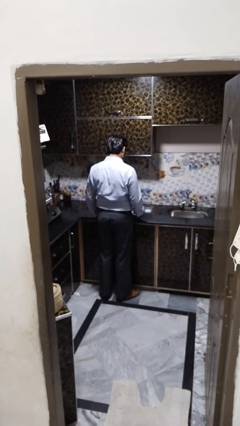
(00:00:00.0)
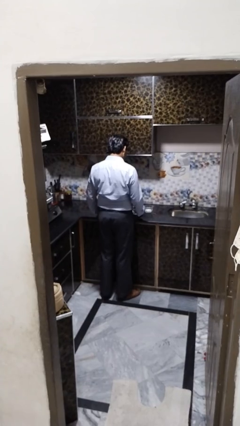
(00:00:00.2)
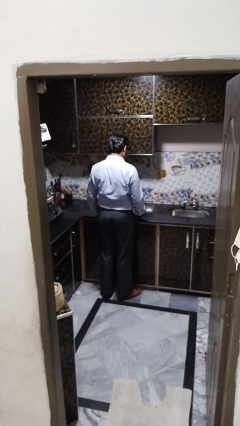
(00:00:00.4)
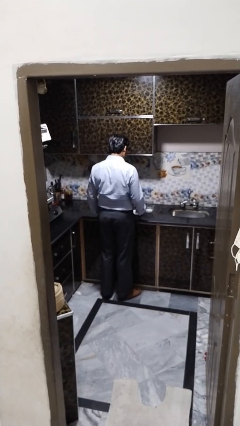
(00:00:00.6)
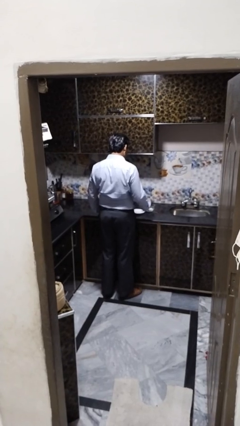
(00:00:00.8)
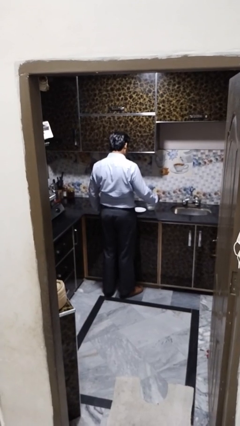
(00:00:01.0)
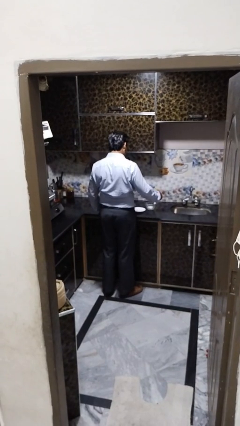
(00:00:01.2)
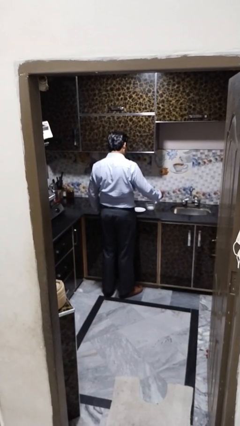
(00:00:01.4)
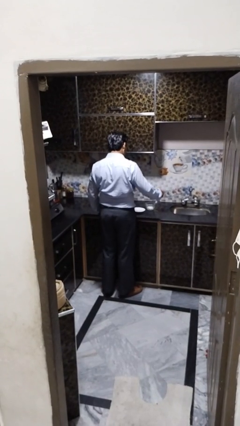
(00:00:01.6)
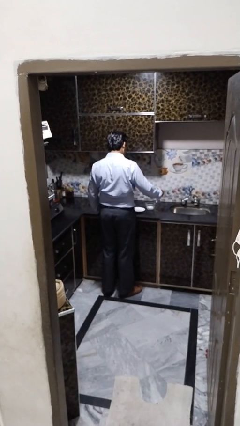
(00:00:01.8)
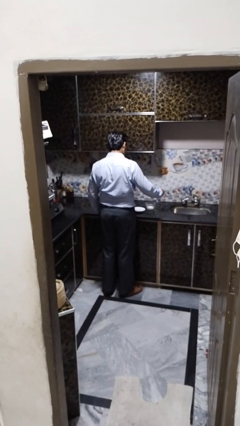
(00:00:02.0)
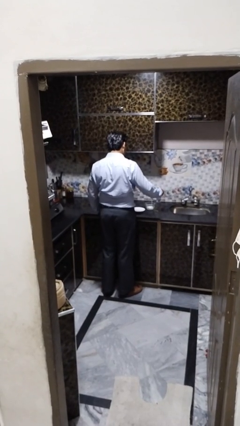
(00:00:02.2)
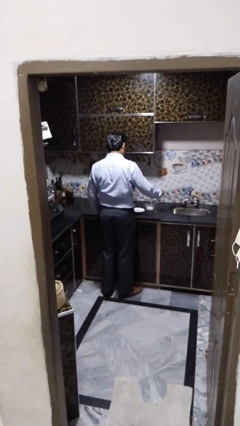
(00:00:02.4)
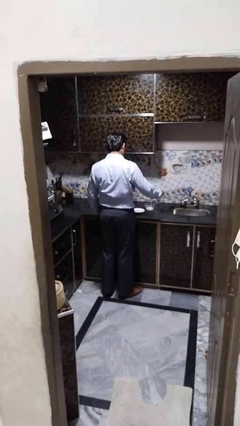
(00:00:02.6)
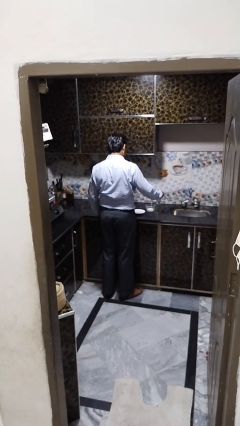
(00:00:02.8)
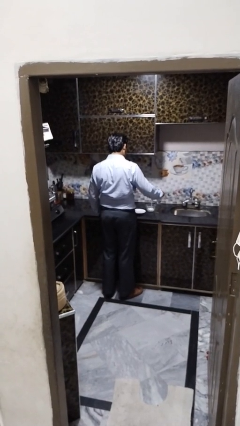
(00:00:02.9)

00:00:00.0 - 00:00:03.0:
person pours into bowl

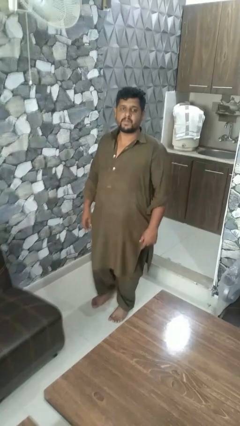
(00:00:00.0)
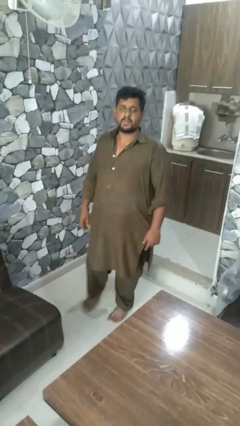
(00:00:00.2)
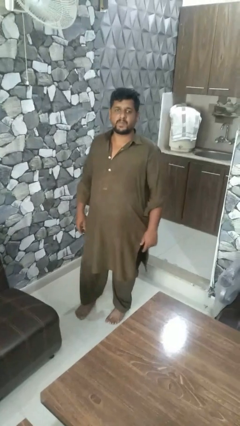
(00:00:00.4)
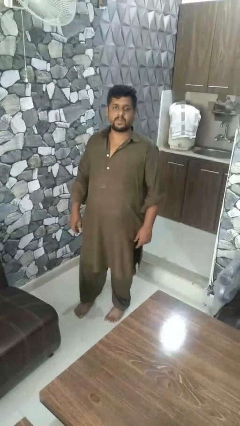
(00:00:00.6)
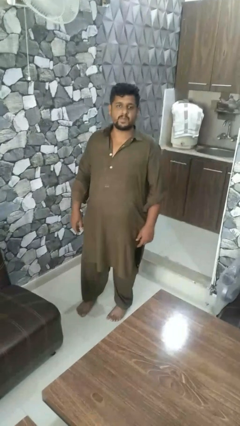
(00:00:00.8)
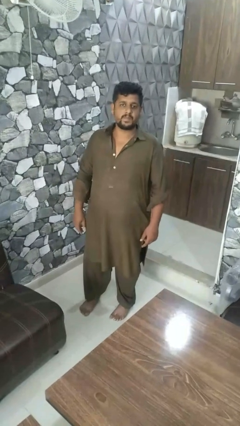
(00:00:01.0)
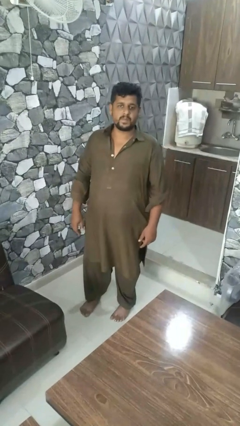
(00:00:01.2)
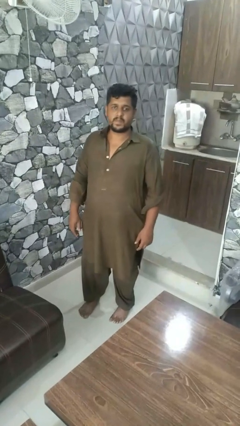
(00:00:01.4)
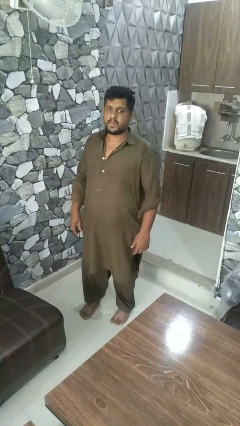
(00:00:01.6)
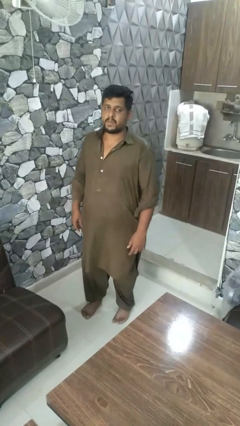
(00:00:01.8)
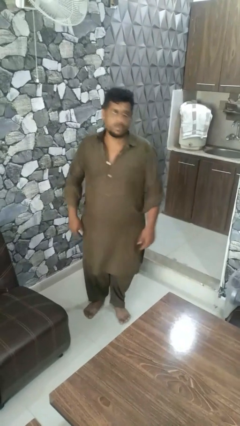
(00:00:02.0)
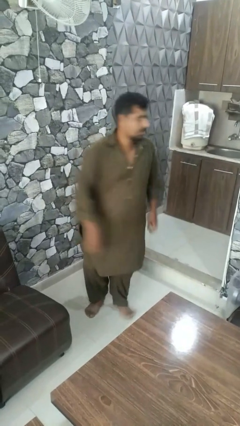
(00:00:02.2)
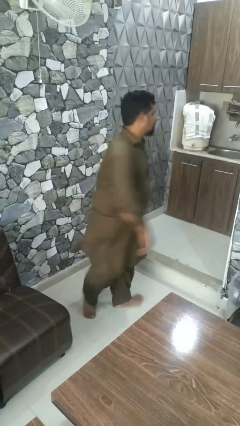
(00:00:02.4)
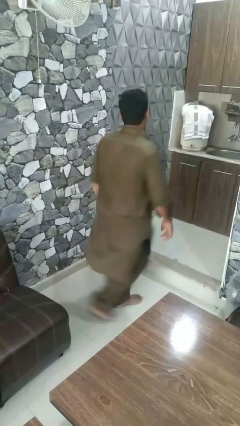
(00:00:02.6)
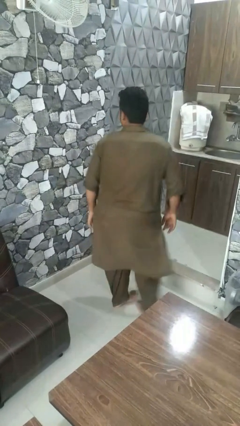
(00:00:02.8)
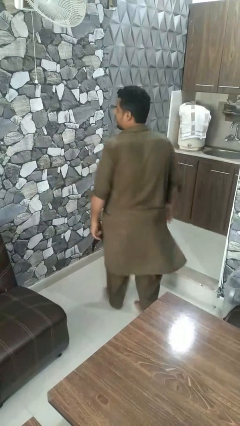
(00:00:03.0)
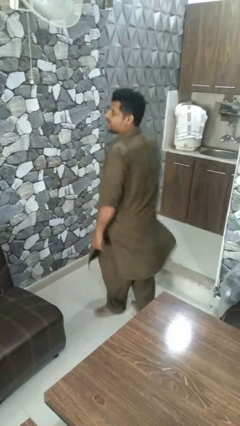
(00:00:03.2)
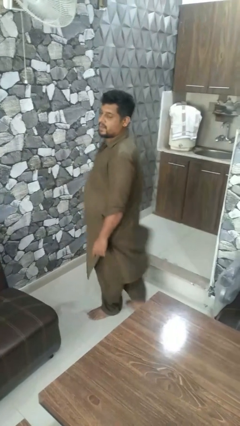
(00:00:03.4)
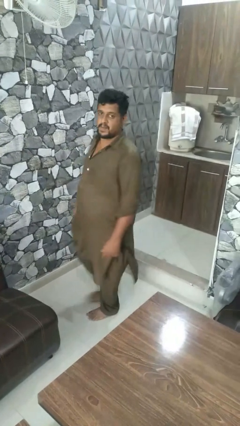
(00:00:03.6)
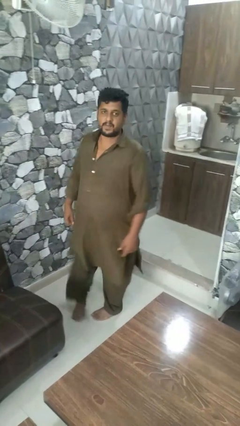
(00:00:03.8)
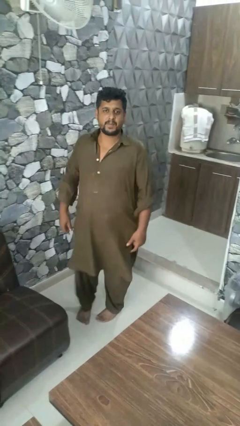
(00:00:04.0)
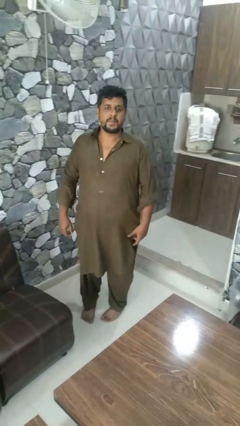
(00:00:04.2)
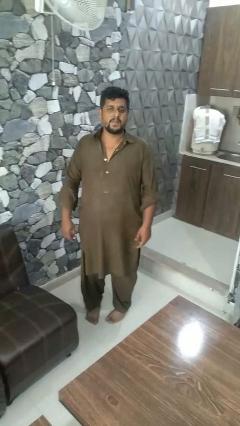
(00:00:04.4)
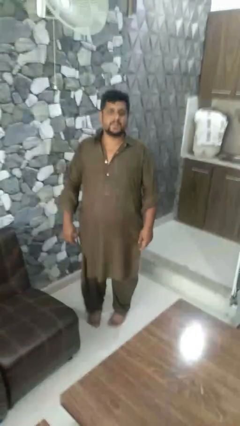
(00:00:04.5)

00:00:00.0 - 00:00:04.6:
person twirls

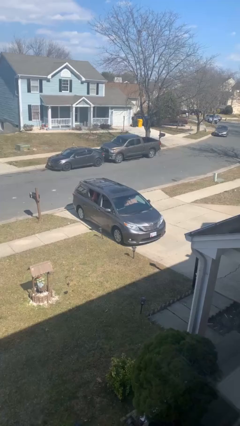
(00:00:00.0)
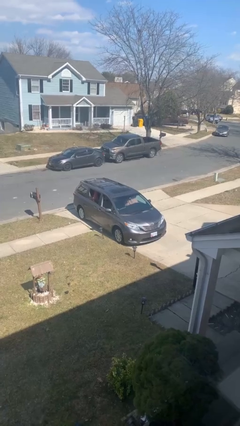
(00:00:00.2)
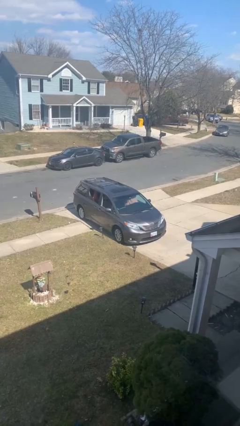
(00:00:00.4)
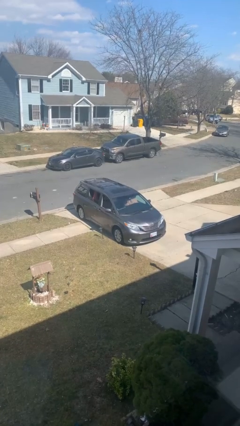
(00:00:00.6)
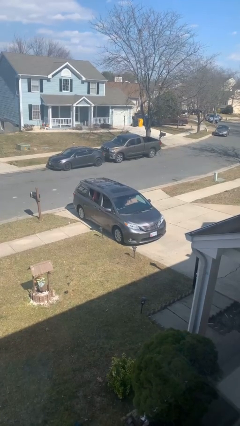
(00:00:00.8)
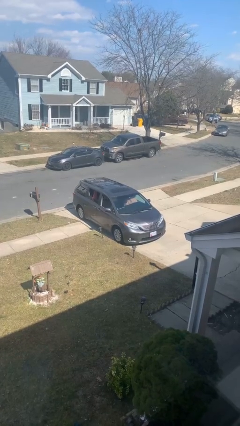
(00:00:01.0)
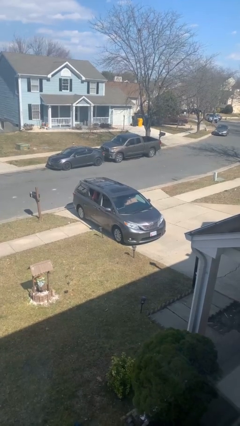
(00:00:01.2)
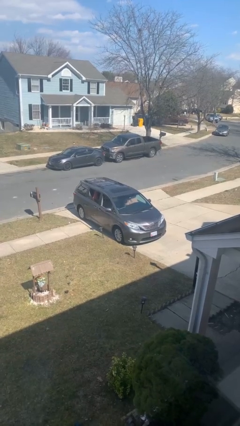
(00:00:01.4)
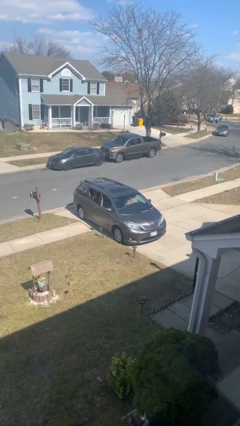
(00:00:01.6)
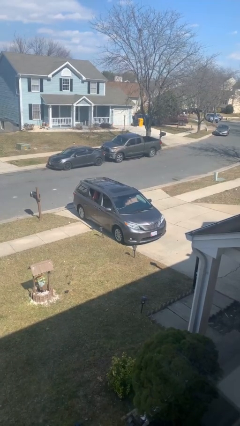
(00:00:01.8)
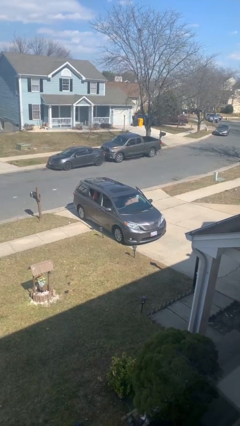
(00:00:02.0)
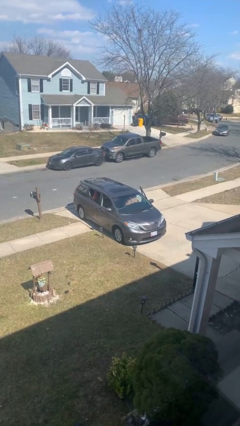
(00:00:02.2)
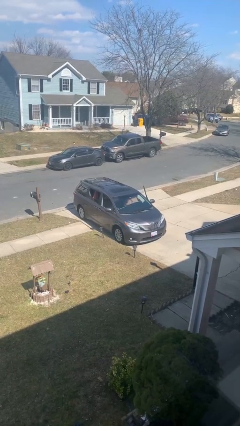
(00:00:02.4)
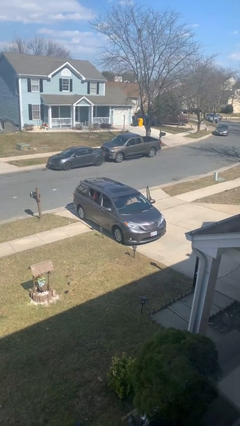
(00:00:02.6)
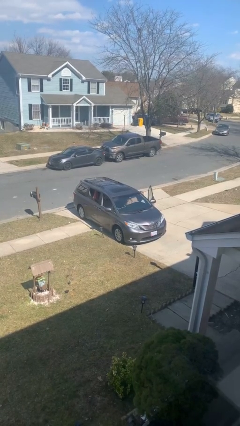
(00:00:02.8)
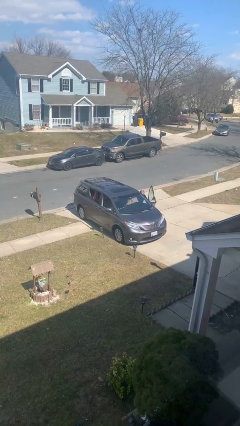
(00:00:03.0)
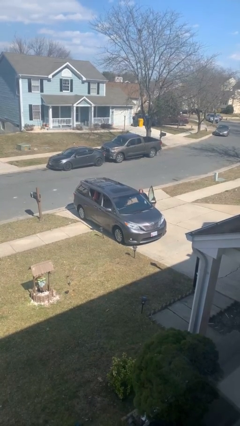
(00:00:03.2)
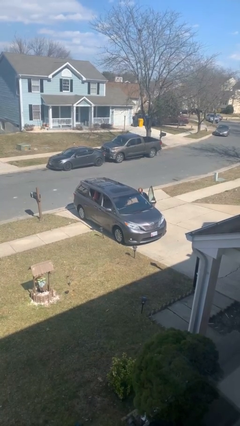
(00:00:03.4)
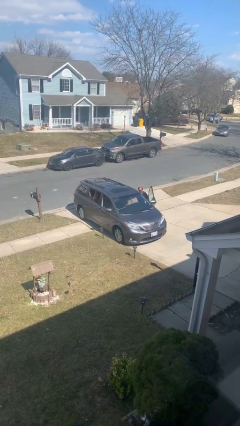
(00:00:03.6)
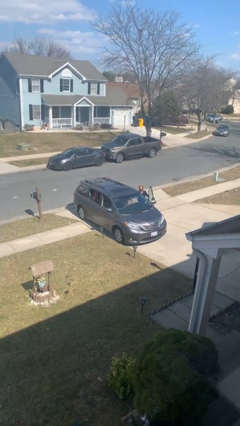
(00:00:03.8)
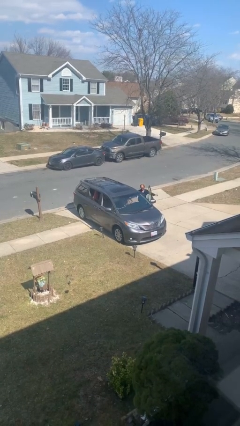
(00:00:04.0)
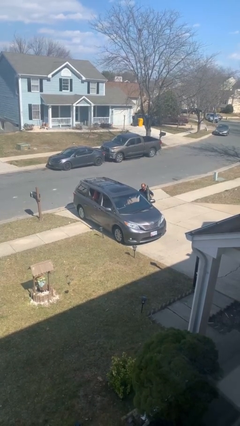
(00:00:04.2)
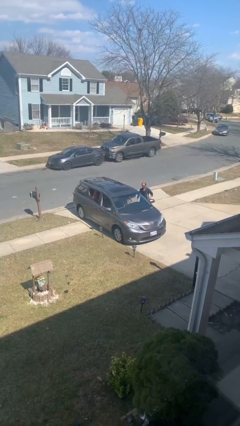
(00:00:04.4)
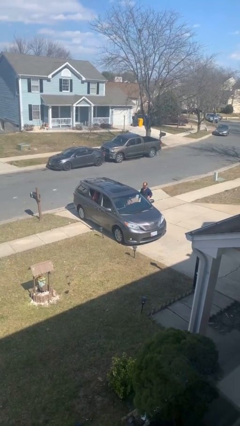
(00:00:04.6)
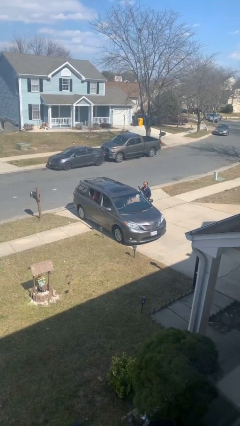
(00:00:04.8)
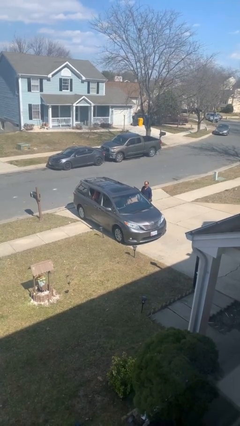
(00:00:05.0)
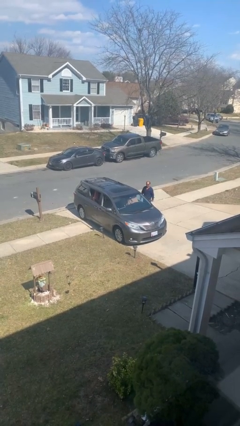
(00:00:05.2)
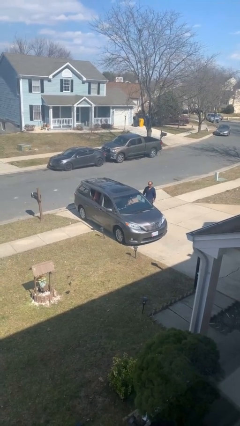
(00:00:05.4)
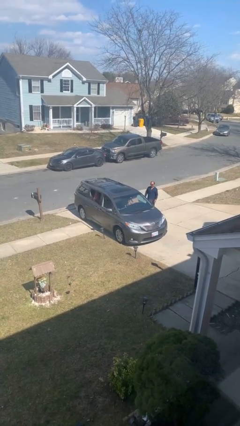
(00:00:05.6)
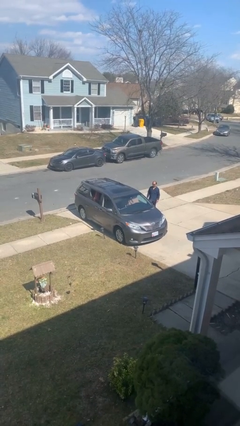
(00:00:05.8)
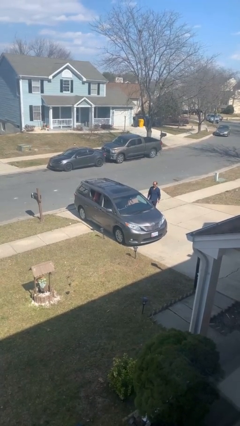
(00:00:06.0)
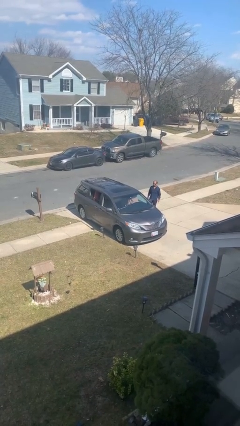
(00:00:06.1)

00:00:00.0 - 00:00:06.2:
car drops off person

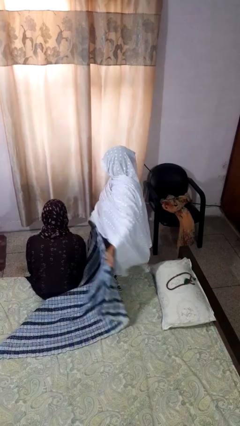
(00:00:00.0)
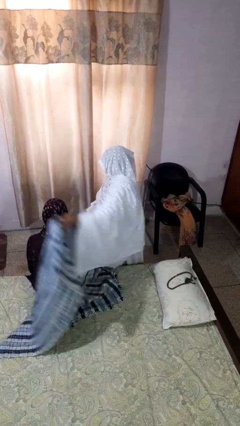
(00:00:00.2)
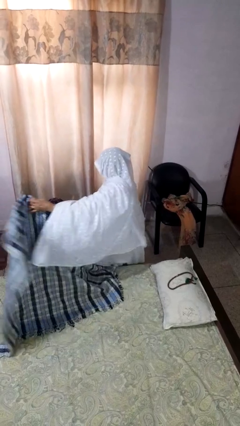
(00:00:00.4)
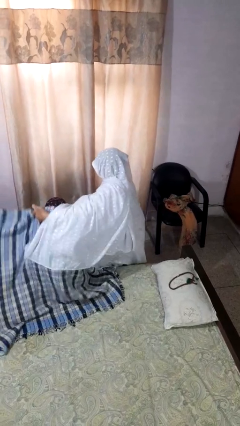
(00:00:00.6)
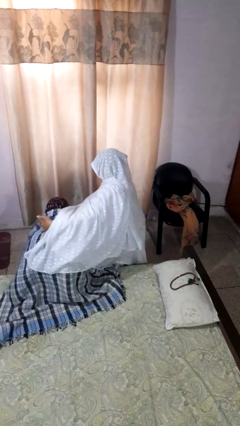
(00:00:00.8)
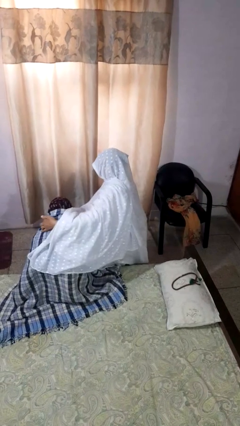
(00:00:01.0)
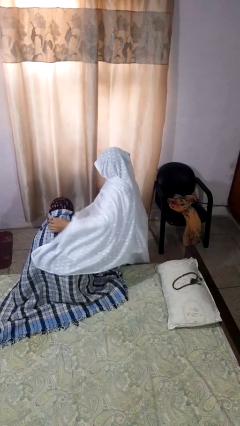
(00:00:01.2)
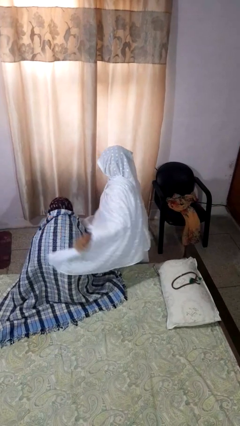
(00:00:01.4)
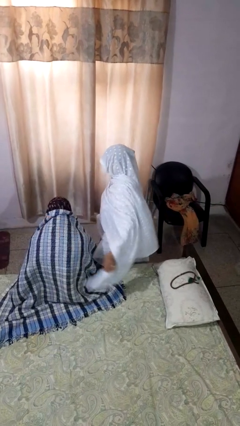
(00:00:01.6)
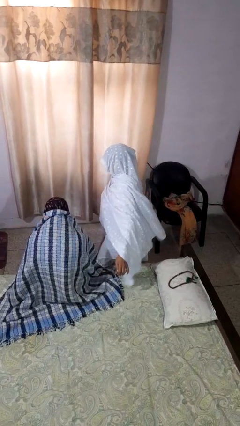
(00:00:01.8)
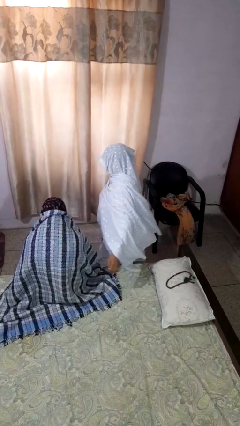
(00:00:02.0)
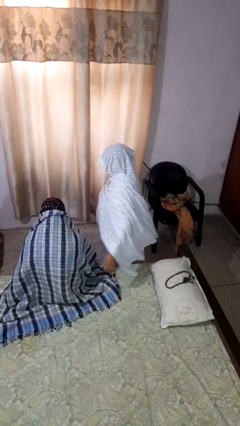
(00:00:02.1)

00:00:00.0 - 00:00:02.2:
person covers friend with blanket

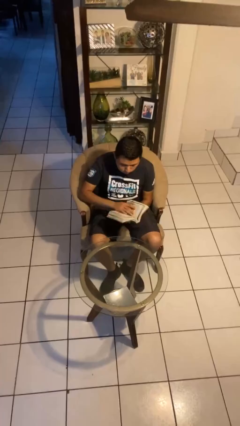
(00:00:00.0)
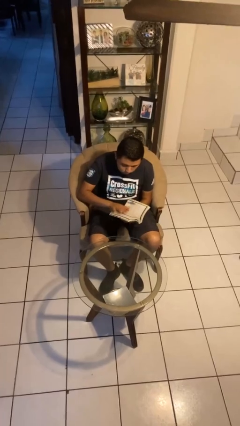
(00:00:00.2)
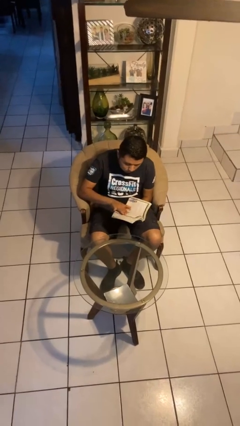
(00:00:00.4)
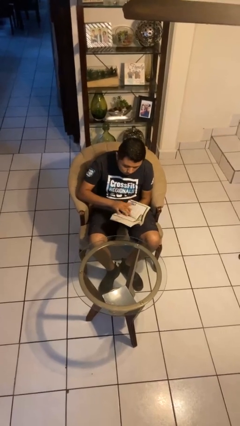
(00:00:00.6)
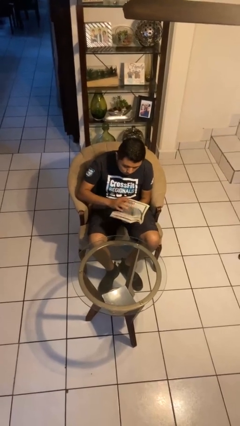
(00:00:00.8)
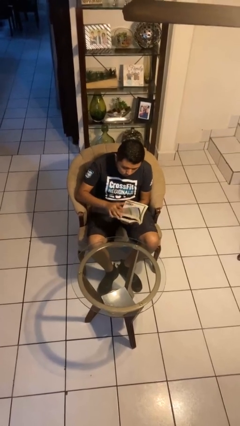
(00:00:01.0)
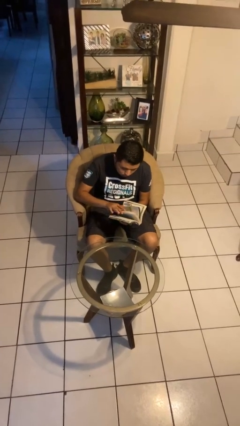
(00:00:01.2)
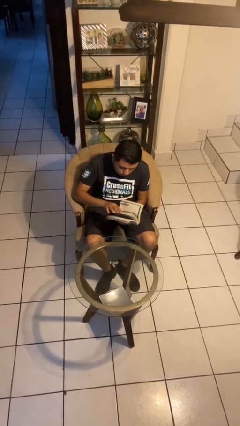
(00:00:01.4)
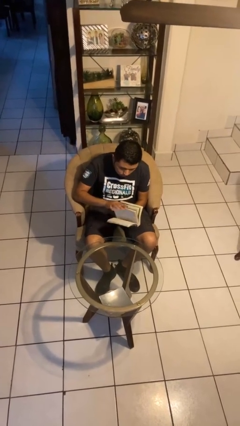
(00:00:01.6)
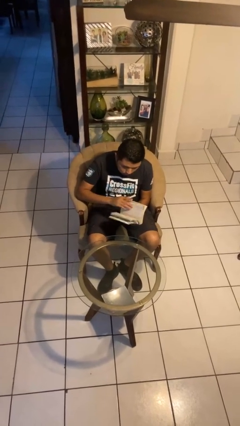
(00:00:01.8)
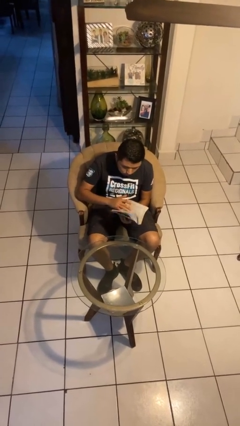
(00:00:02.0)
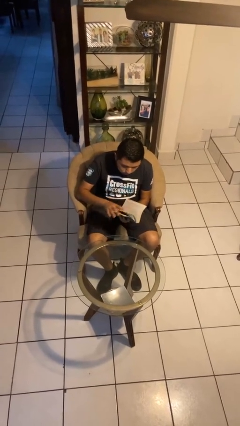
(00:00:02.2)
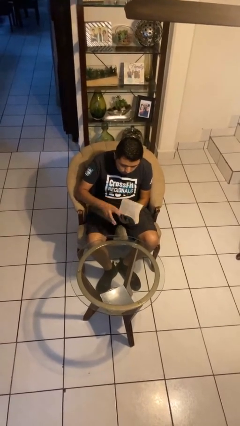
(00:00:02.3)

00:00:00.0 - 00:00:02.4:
person reads book
